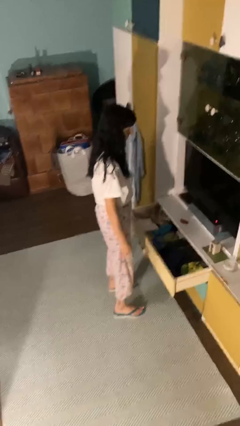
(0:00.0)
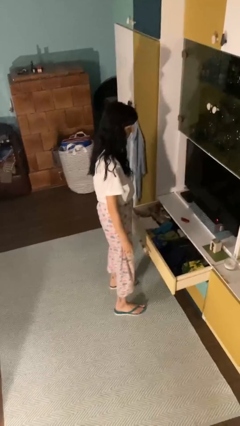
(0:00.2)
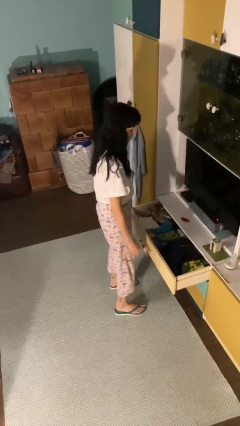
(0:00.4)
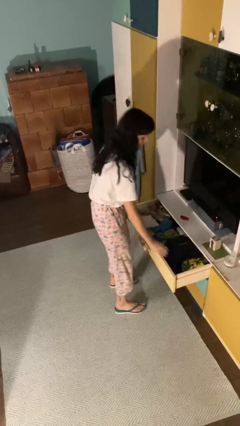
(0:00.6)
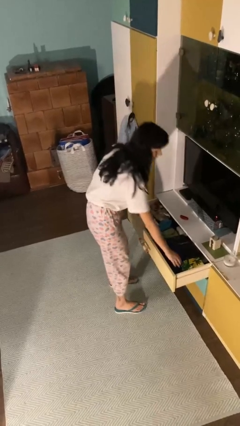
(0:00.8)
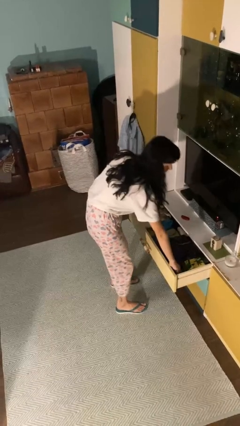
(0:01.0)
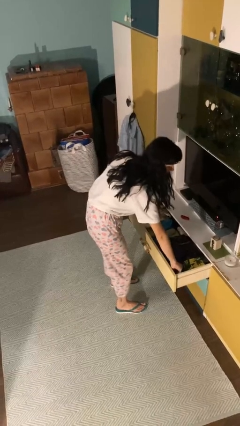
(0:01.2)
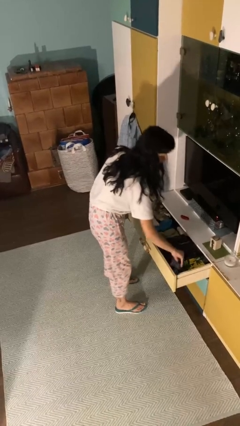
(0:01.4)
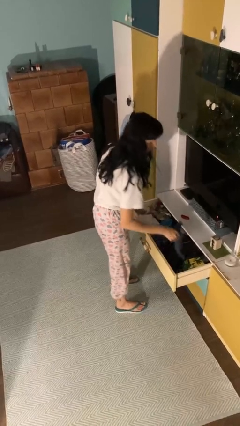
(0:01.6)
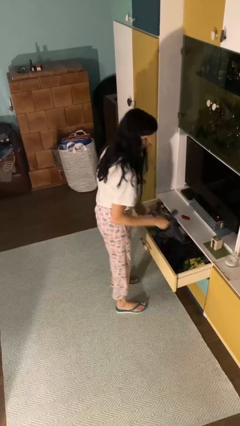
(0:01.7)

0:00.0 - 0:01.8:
person takes clothes from dresser

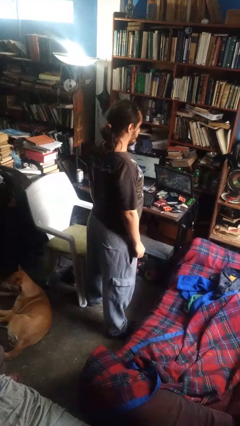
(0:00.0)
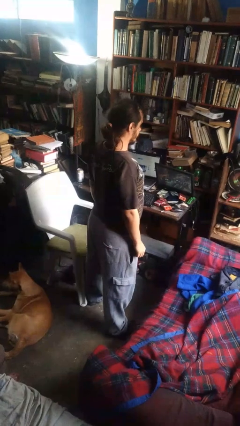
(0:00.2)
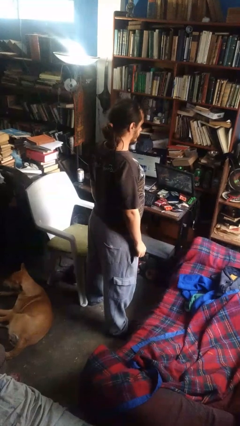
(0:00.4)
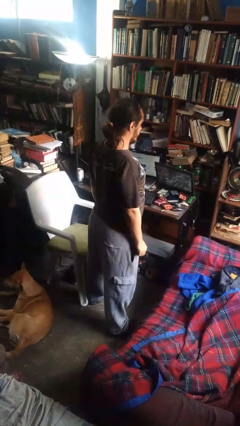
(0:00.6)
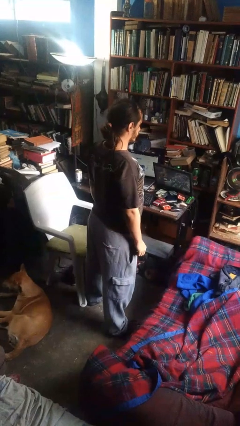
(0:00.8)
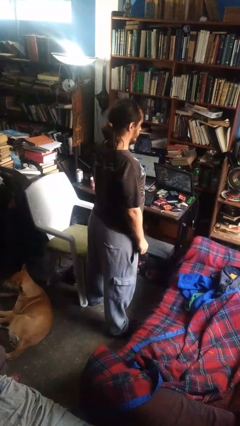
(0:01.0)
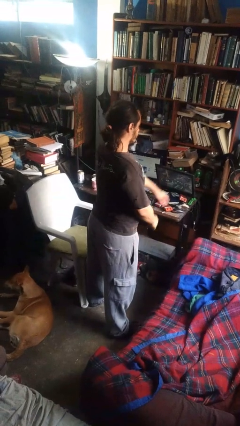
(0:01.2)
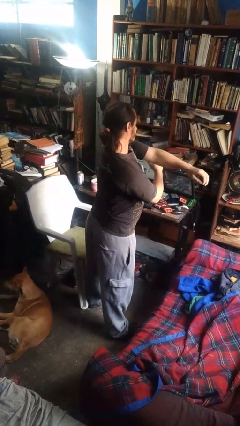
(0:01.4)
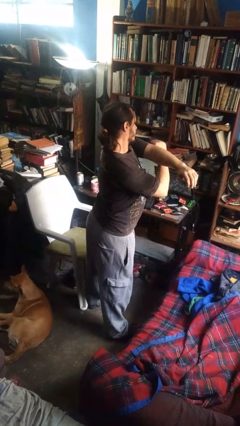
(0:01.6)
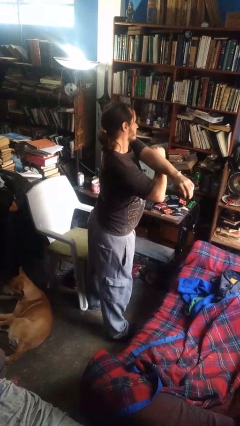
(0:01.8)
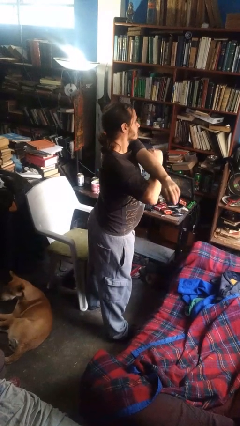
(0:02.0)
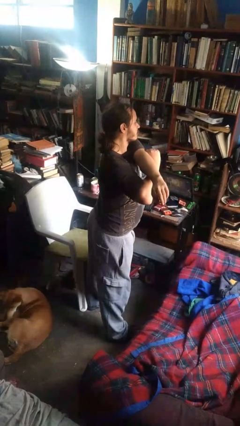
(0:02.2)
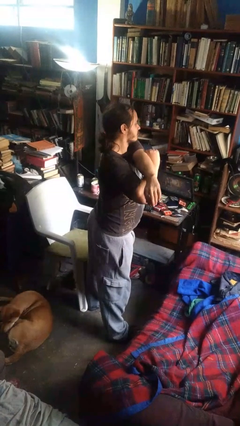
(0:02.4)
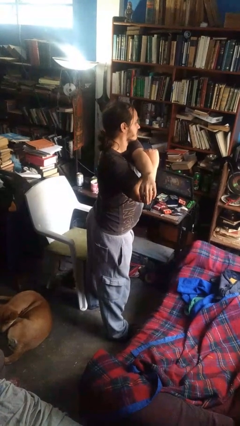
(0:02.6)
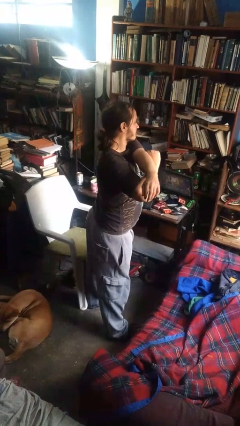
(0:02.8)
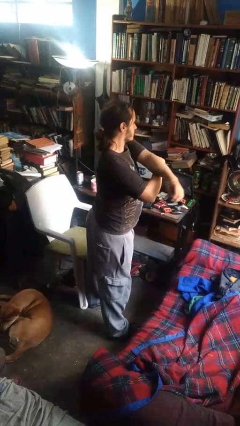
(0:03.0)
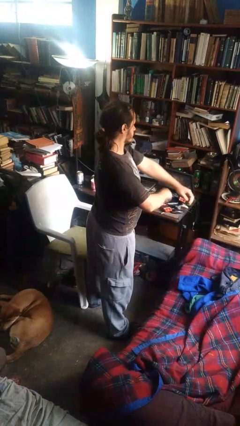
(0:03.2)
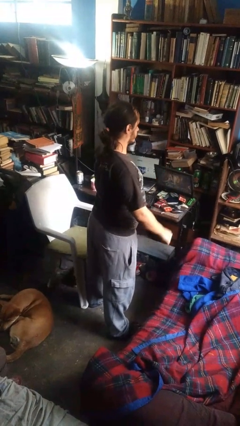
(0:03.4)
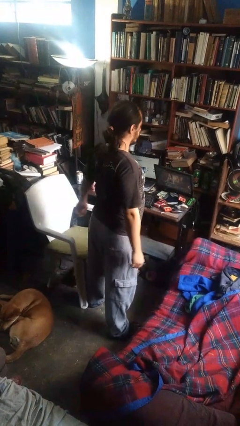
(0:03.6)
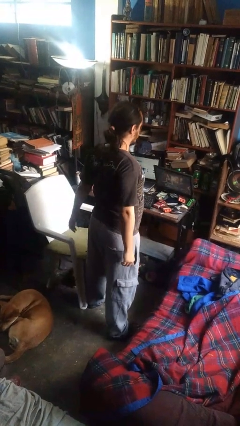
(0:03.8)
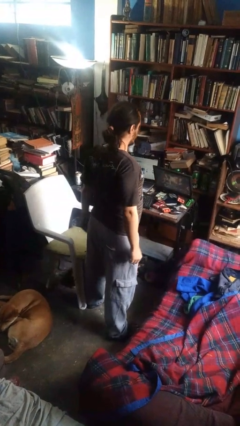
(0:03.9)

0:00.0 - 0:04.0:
person stretches arms to side

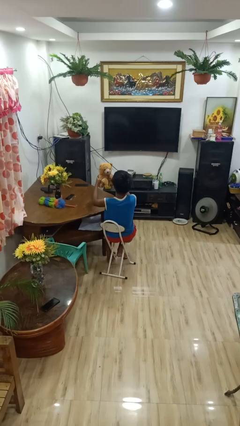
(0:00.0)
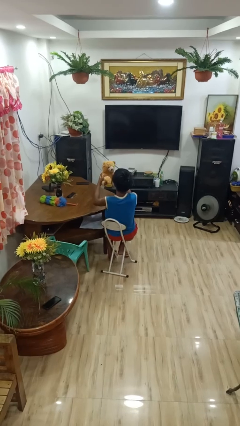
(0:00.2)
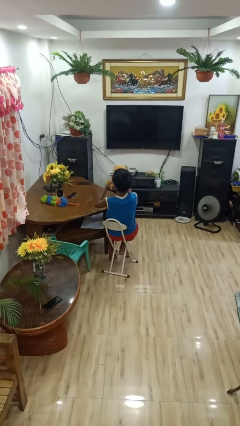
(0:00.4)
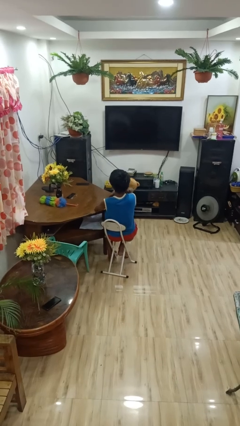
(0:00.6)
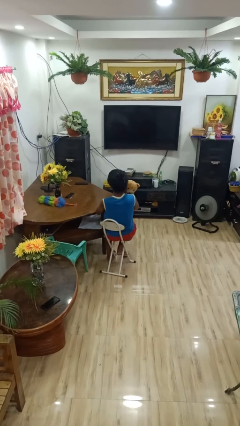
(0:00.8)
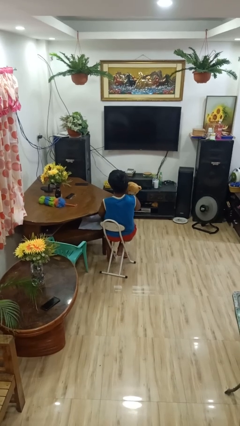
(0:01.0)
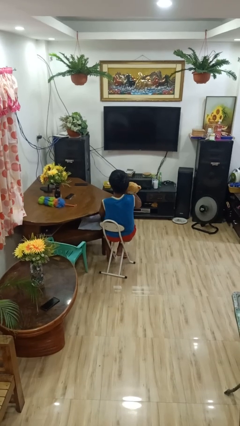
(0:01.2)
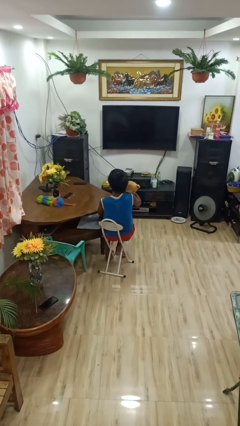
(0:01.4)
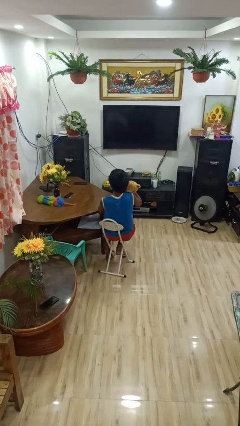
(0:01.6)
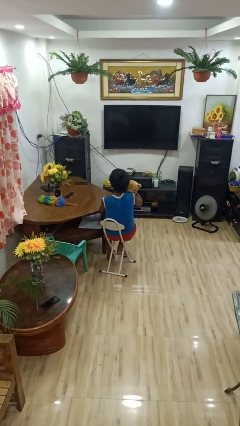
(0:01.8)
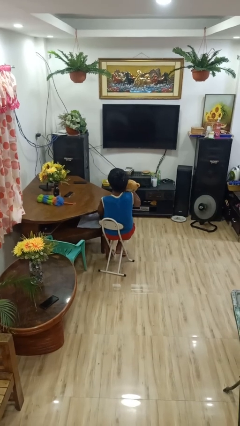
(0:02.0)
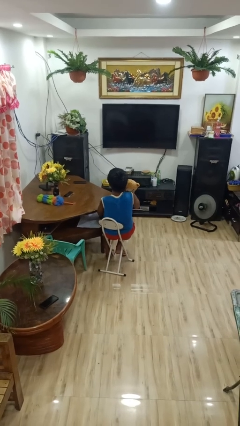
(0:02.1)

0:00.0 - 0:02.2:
person hugs stuffed animal

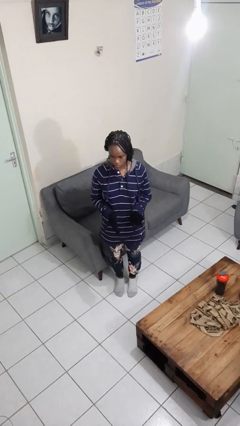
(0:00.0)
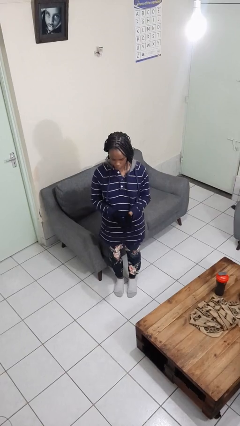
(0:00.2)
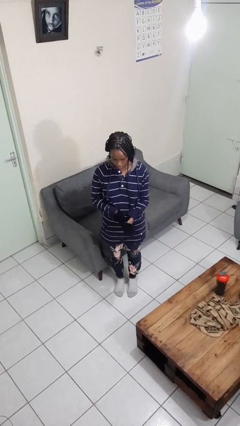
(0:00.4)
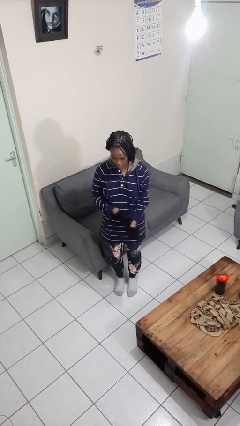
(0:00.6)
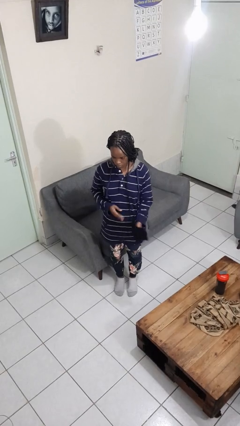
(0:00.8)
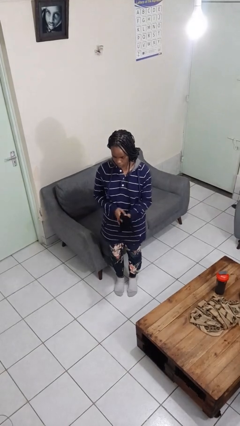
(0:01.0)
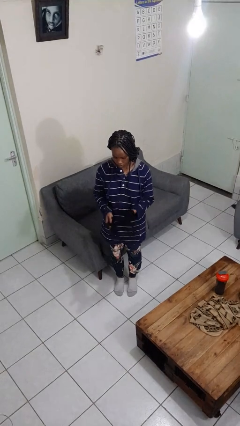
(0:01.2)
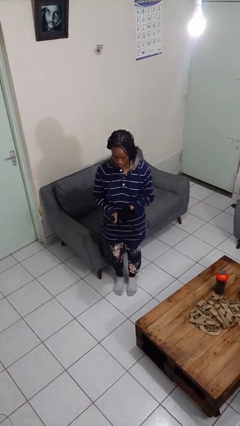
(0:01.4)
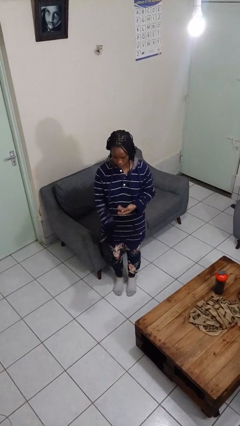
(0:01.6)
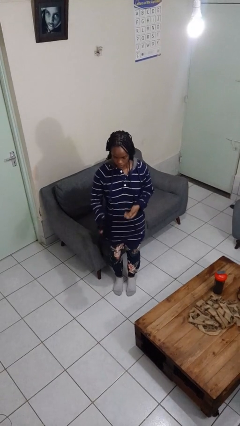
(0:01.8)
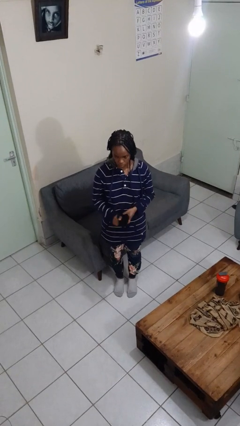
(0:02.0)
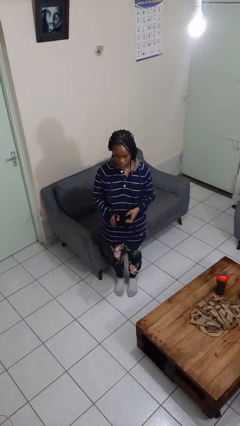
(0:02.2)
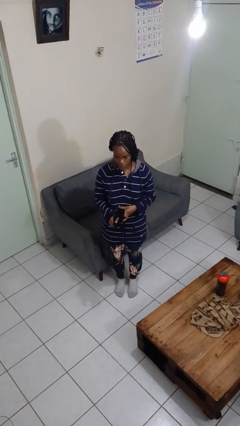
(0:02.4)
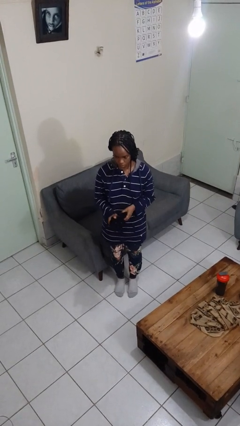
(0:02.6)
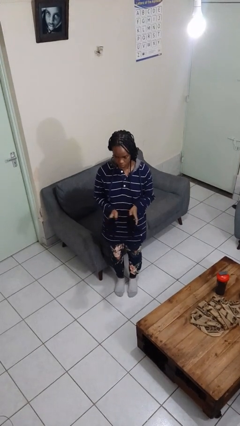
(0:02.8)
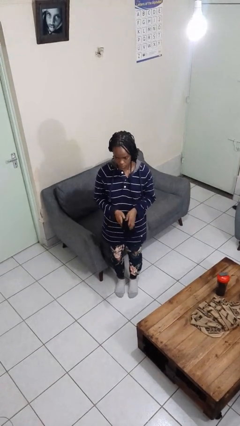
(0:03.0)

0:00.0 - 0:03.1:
person takes off gloves

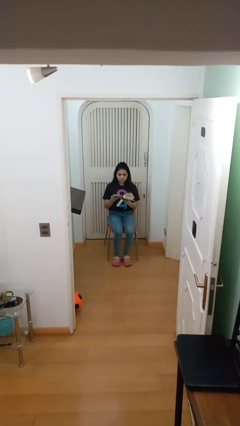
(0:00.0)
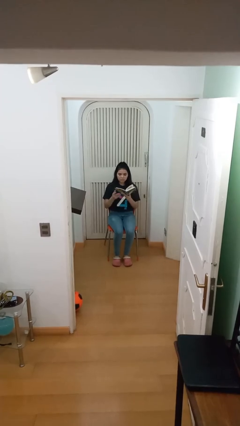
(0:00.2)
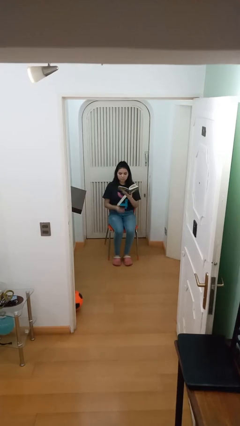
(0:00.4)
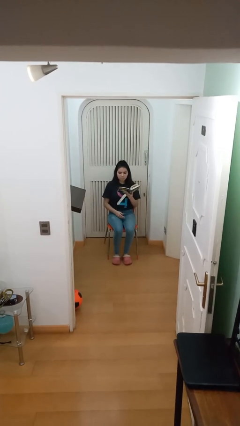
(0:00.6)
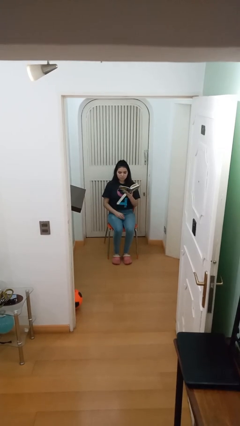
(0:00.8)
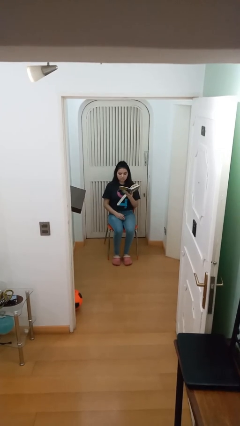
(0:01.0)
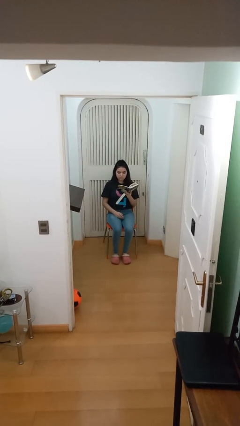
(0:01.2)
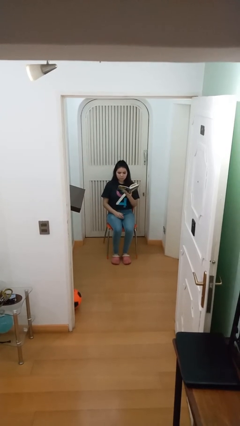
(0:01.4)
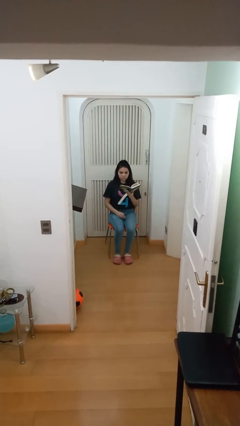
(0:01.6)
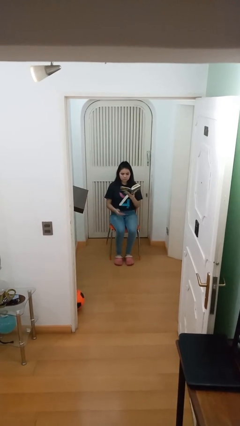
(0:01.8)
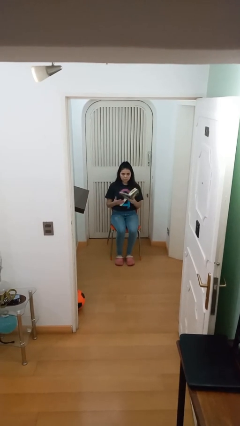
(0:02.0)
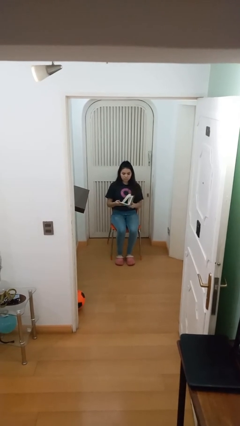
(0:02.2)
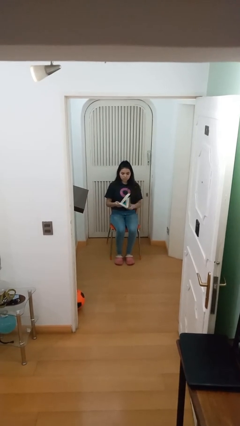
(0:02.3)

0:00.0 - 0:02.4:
person reads document

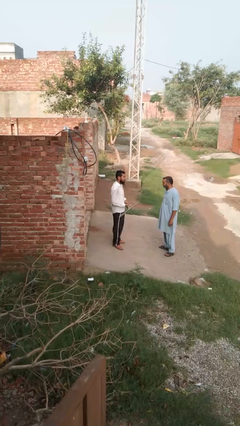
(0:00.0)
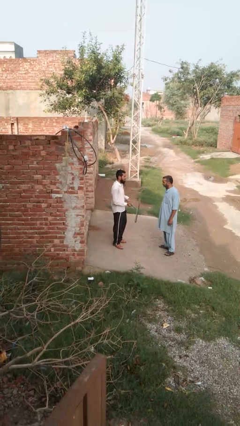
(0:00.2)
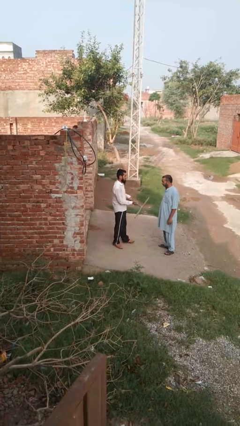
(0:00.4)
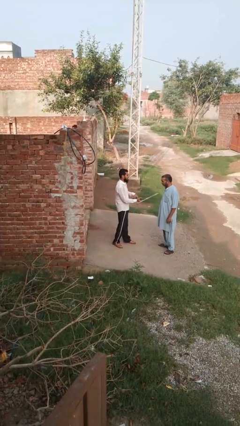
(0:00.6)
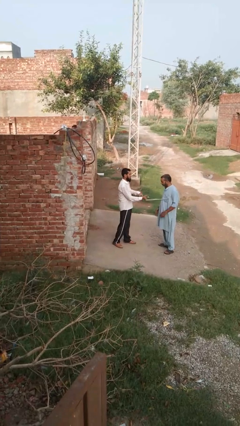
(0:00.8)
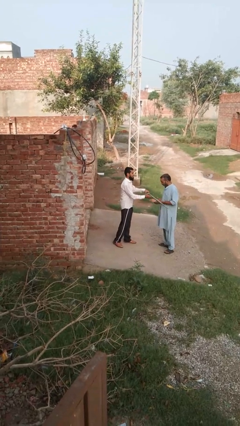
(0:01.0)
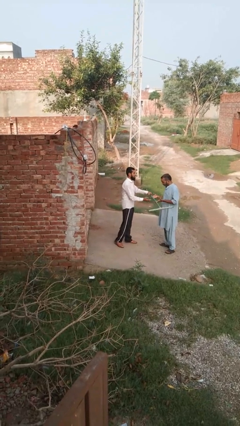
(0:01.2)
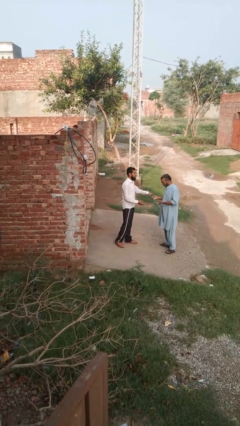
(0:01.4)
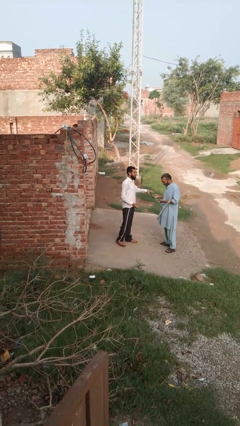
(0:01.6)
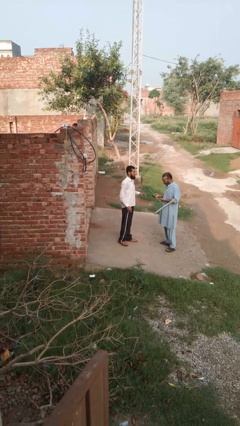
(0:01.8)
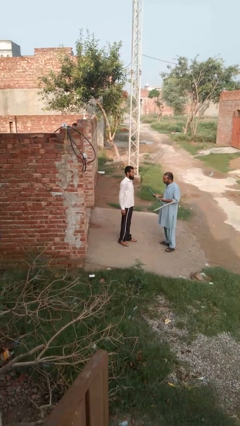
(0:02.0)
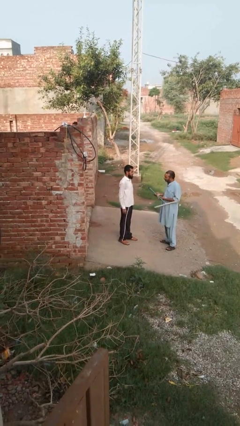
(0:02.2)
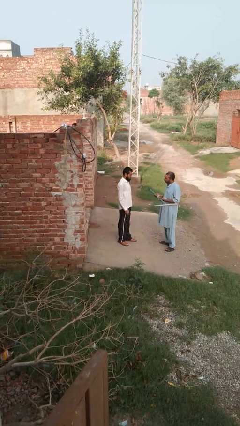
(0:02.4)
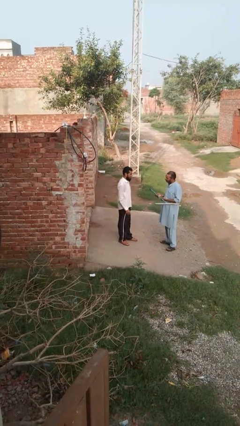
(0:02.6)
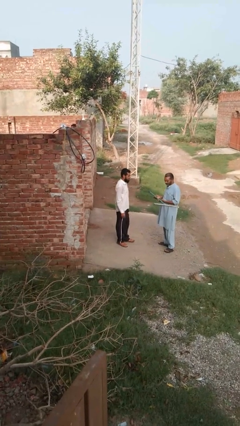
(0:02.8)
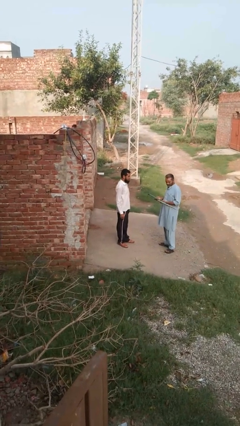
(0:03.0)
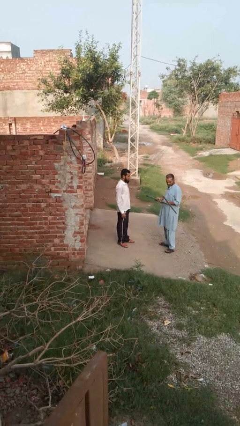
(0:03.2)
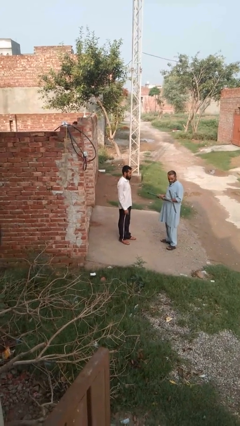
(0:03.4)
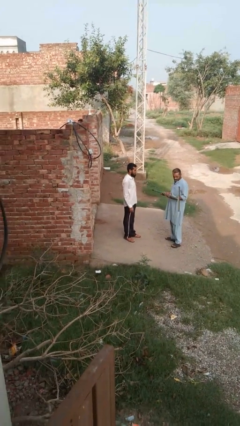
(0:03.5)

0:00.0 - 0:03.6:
person transfers object to person

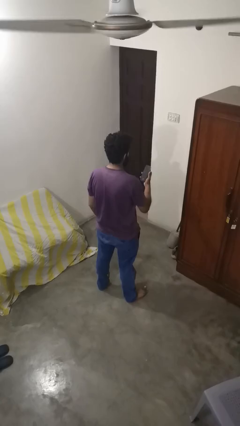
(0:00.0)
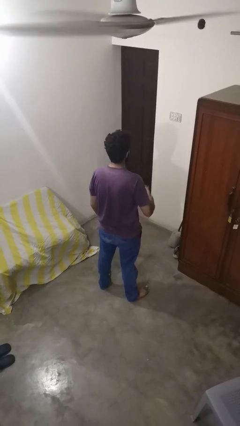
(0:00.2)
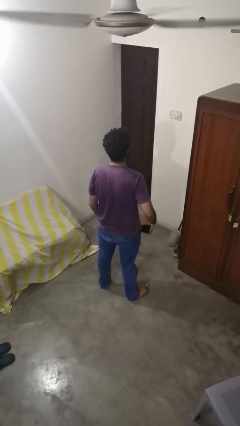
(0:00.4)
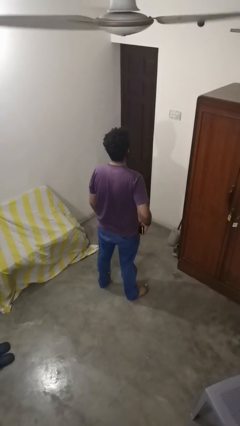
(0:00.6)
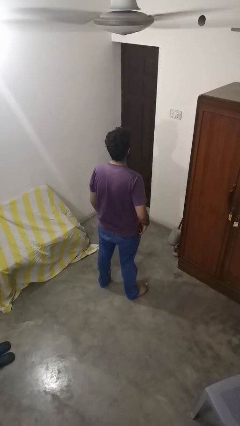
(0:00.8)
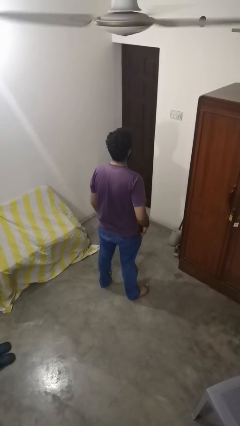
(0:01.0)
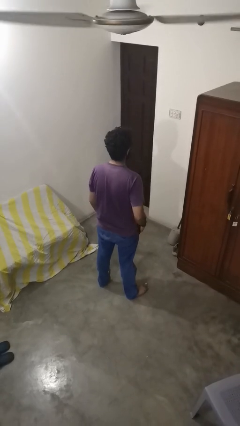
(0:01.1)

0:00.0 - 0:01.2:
person puts phone into pocket
